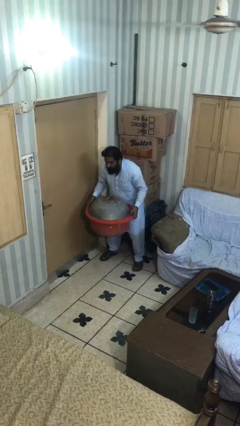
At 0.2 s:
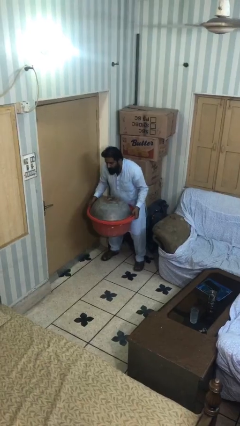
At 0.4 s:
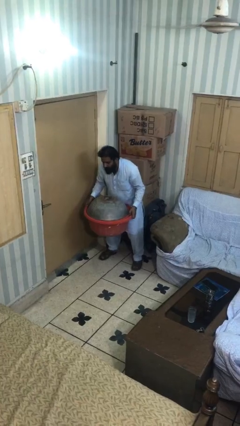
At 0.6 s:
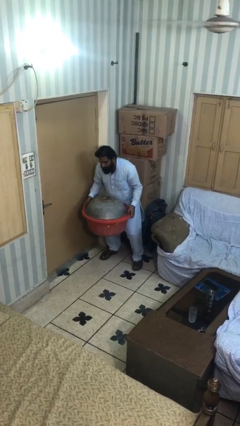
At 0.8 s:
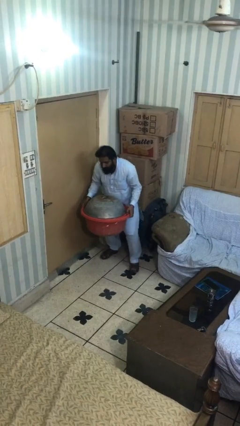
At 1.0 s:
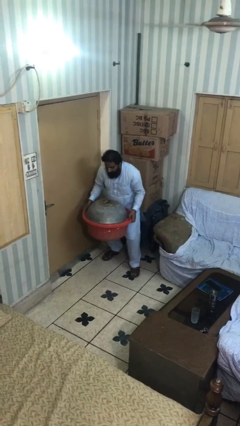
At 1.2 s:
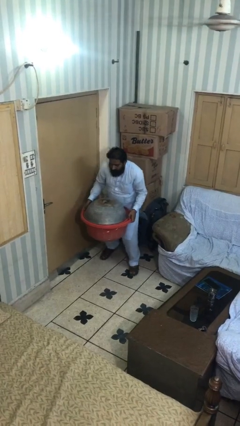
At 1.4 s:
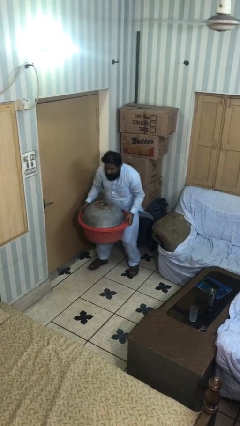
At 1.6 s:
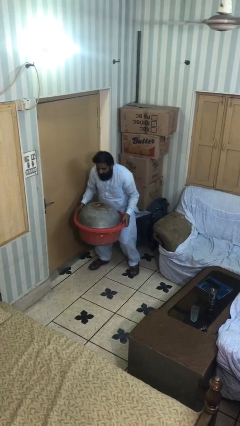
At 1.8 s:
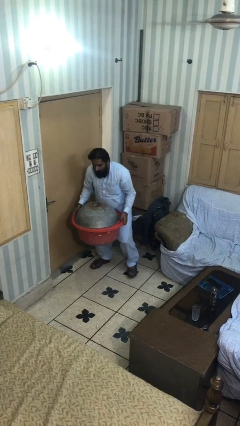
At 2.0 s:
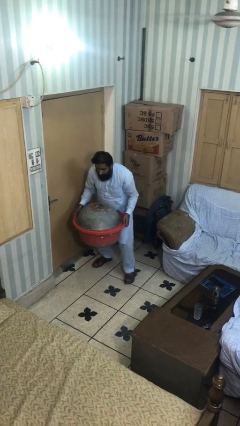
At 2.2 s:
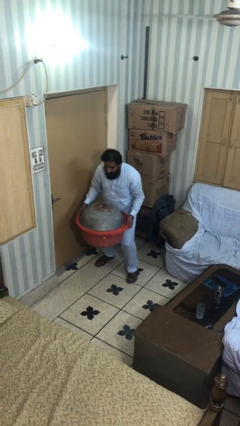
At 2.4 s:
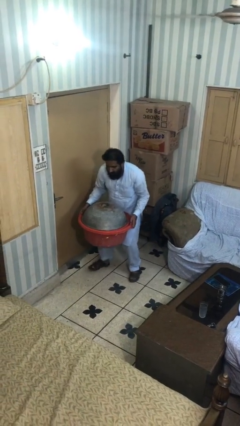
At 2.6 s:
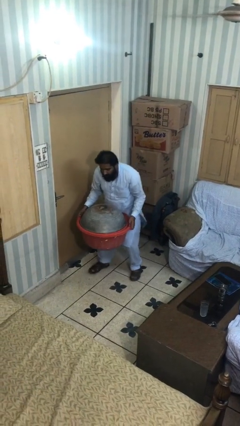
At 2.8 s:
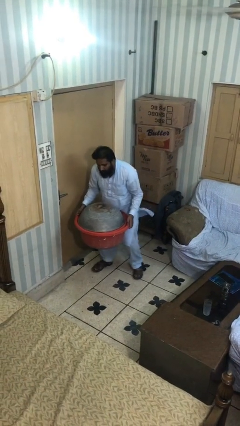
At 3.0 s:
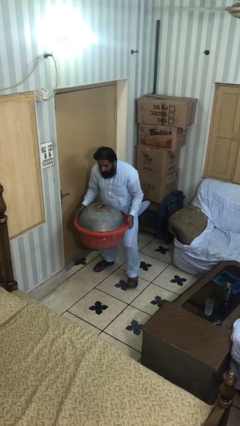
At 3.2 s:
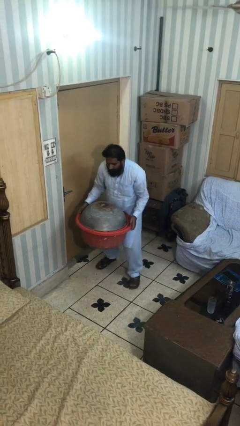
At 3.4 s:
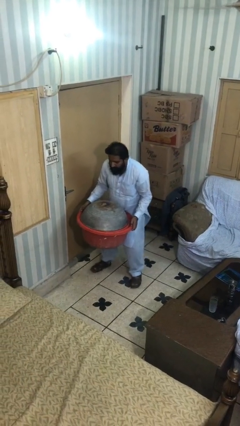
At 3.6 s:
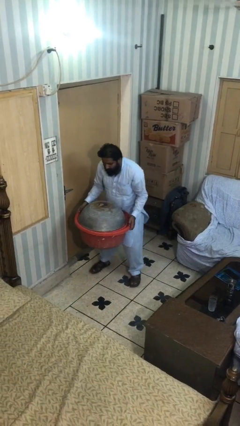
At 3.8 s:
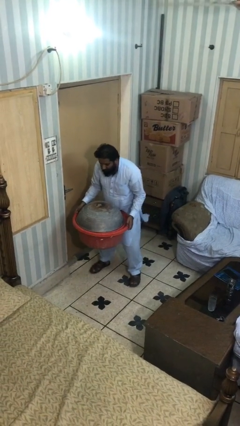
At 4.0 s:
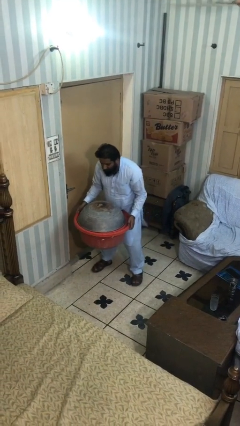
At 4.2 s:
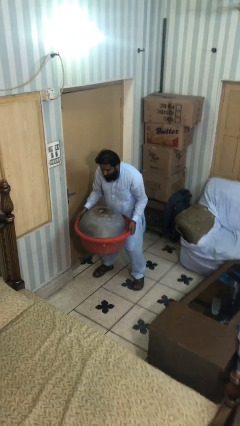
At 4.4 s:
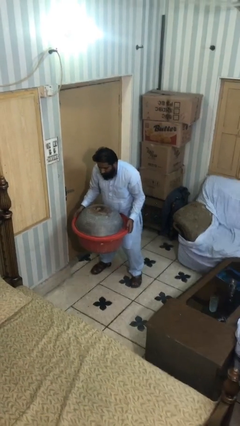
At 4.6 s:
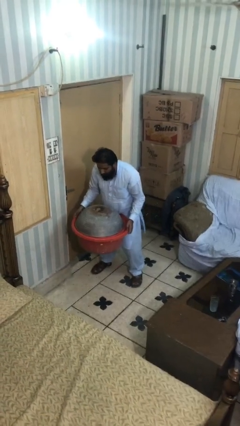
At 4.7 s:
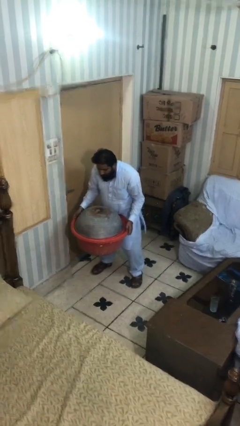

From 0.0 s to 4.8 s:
person carries heavy object

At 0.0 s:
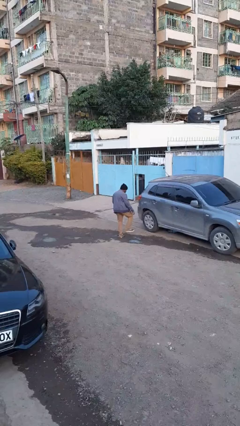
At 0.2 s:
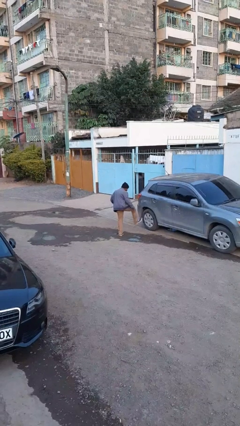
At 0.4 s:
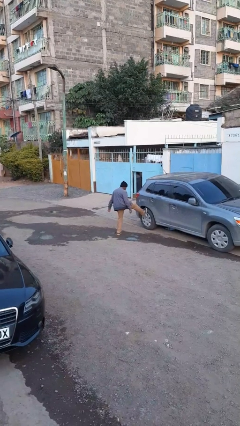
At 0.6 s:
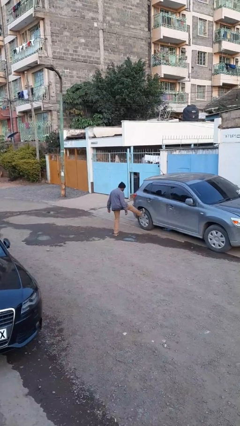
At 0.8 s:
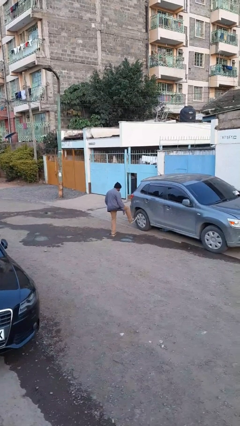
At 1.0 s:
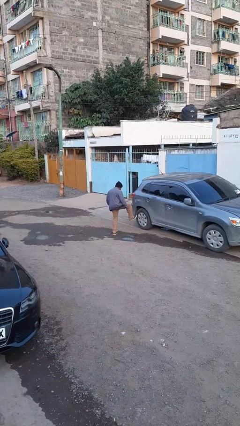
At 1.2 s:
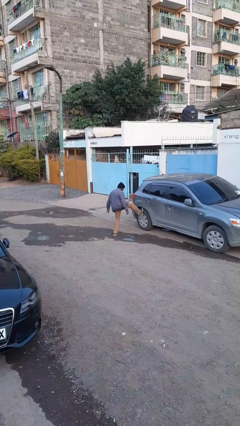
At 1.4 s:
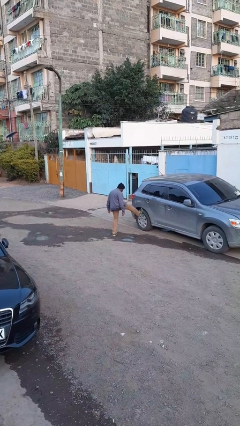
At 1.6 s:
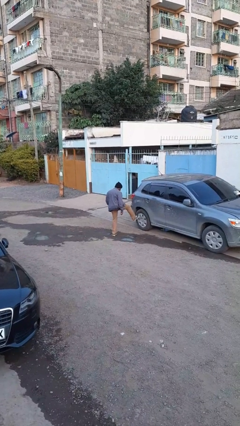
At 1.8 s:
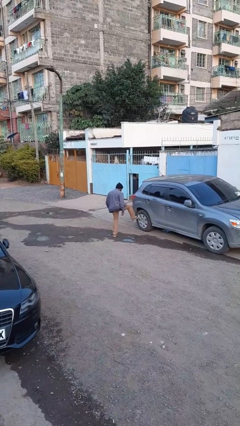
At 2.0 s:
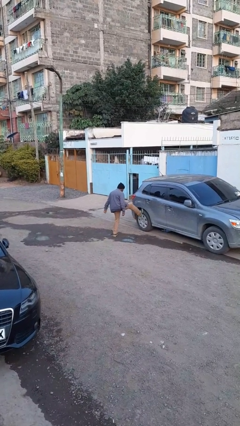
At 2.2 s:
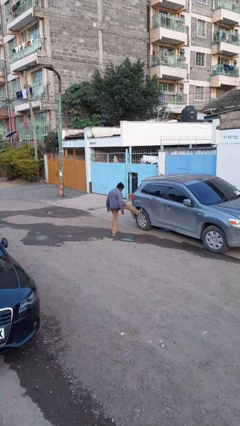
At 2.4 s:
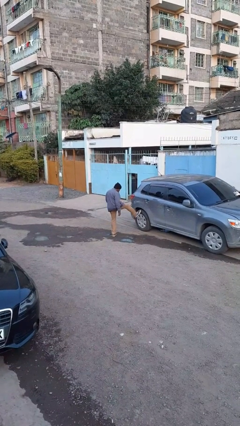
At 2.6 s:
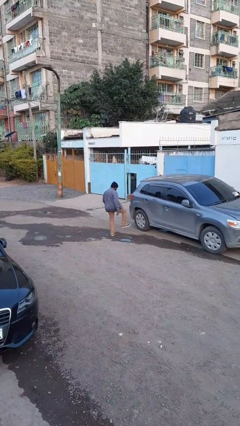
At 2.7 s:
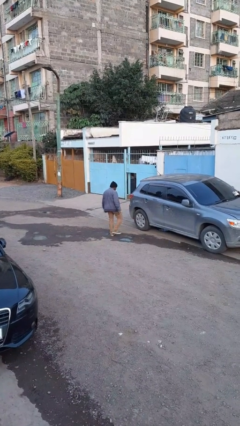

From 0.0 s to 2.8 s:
person kicks car tires

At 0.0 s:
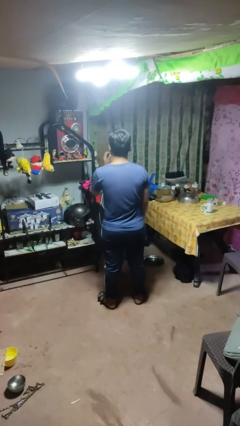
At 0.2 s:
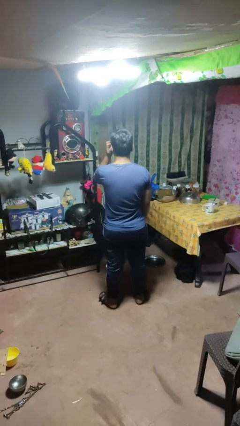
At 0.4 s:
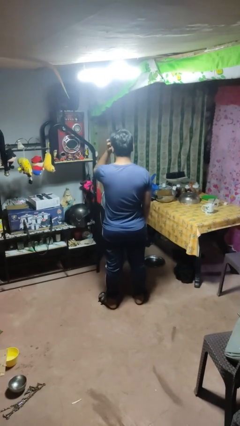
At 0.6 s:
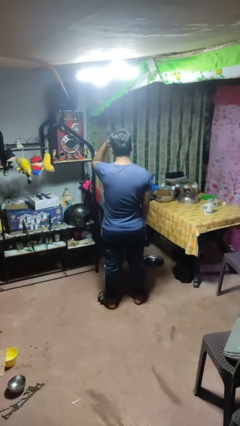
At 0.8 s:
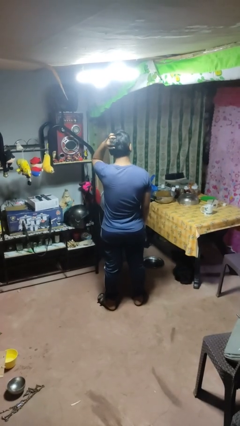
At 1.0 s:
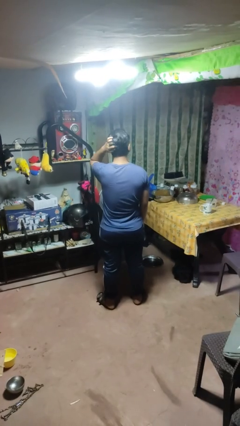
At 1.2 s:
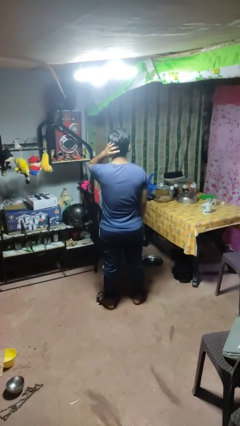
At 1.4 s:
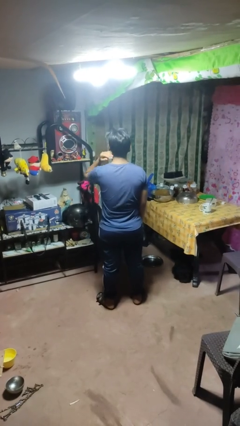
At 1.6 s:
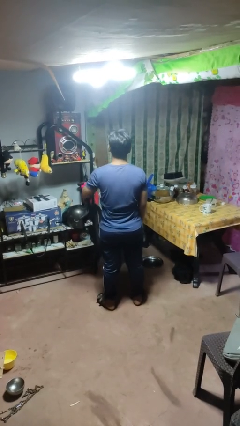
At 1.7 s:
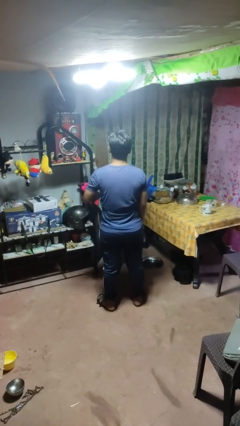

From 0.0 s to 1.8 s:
person strokes hair

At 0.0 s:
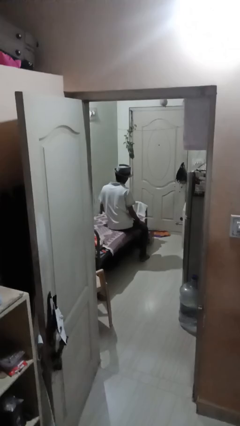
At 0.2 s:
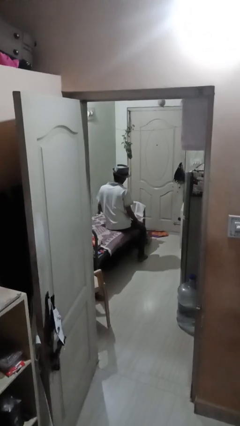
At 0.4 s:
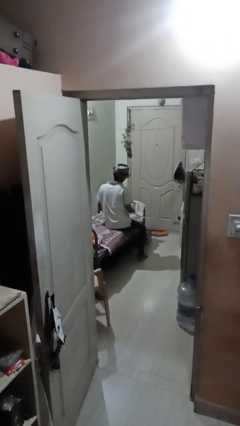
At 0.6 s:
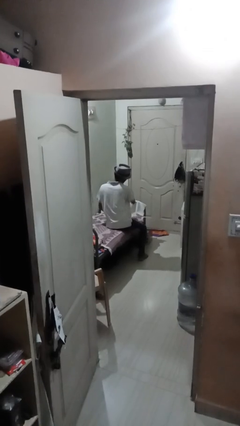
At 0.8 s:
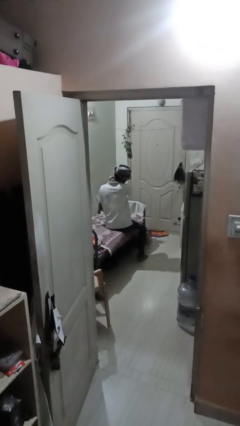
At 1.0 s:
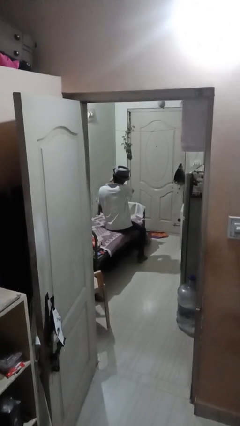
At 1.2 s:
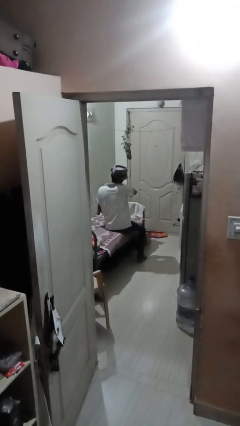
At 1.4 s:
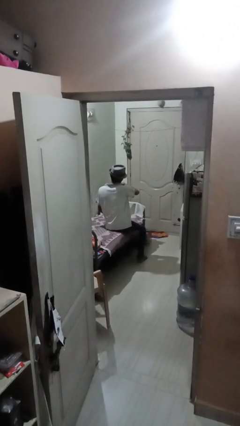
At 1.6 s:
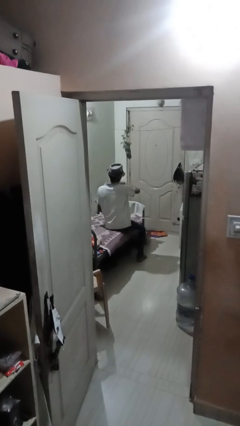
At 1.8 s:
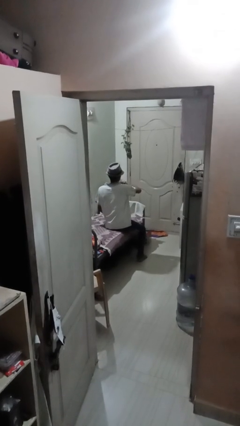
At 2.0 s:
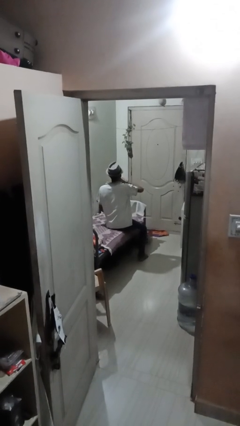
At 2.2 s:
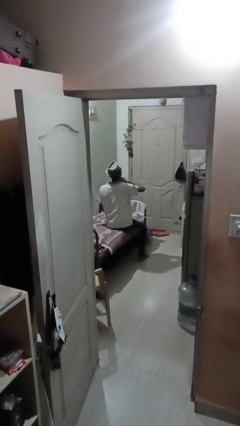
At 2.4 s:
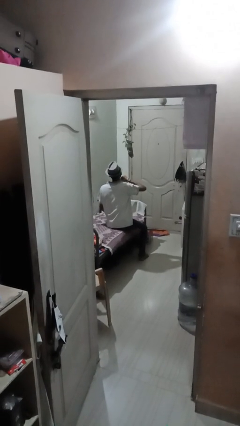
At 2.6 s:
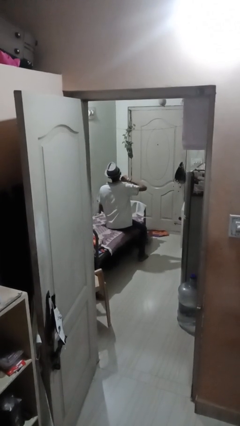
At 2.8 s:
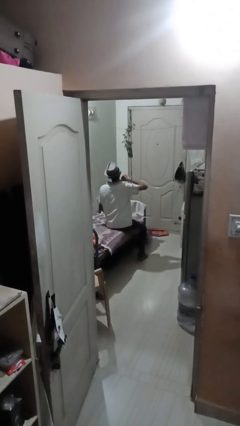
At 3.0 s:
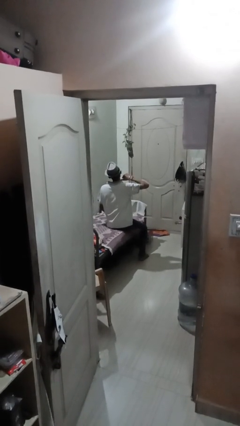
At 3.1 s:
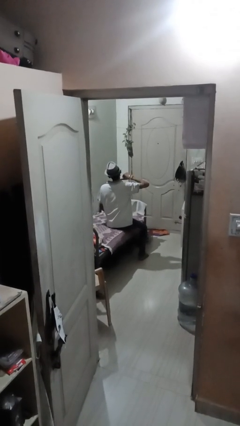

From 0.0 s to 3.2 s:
person gestures cut

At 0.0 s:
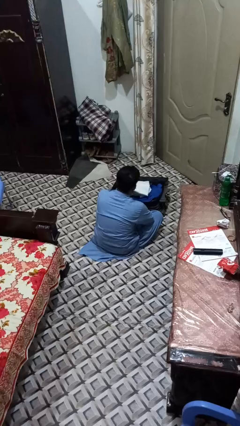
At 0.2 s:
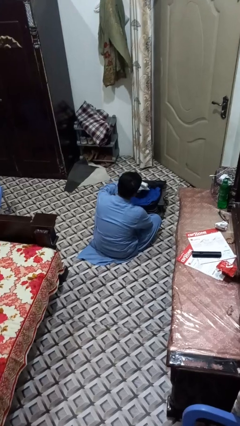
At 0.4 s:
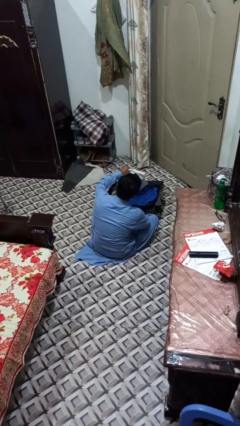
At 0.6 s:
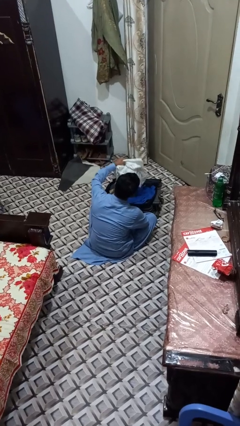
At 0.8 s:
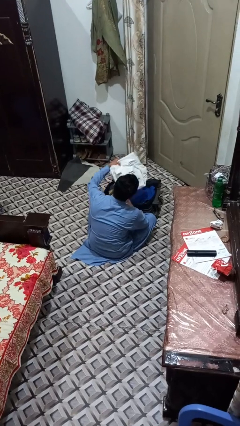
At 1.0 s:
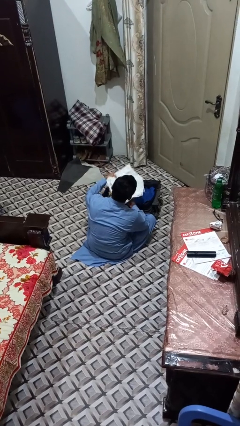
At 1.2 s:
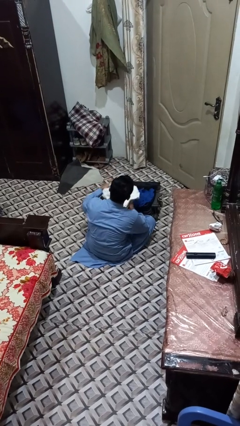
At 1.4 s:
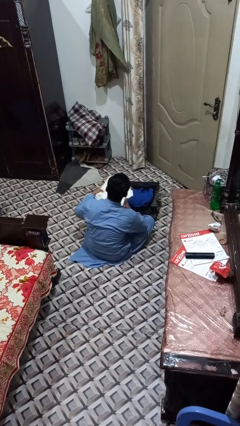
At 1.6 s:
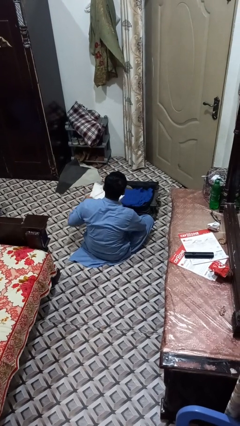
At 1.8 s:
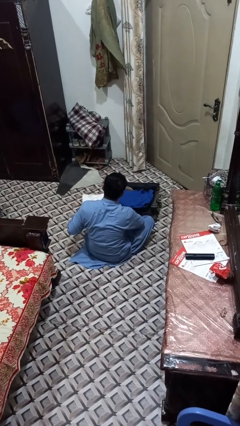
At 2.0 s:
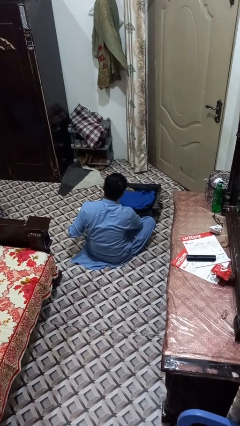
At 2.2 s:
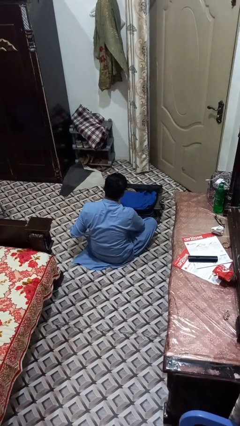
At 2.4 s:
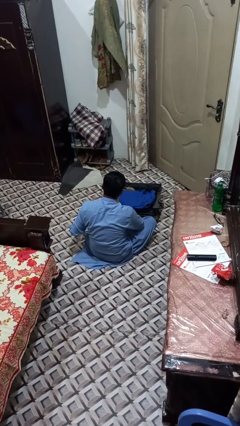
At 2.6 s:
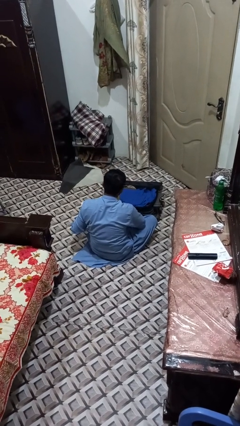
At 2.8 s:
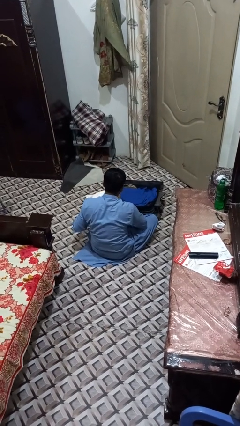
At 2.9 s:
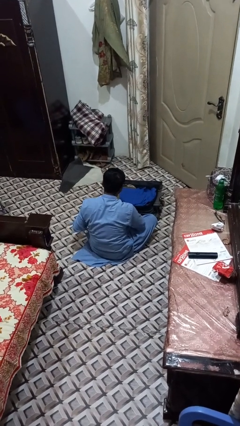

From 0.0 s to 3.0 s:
person unloads clothes from suitcase

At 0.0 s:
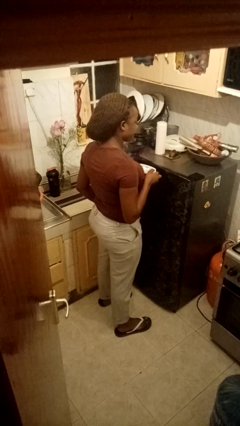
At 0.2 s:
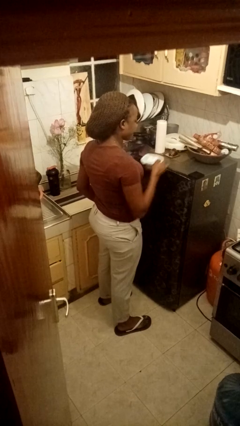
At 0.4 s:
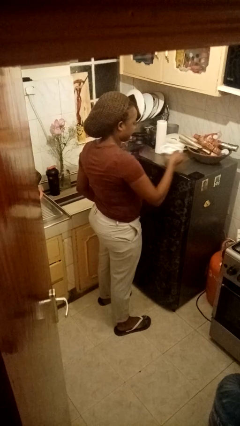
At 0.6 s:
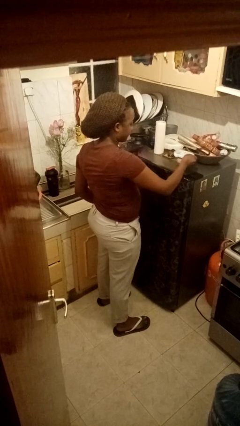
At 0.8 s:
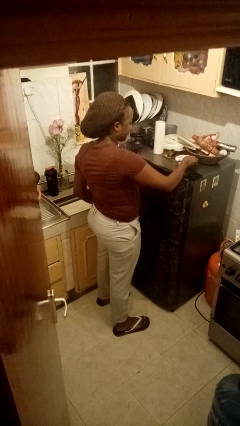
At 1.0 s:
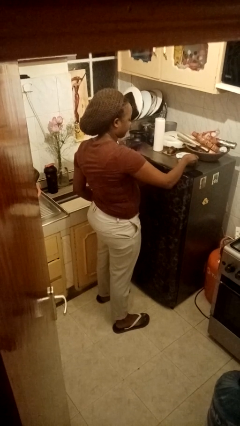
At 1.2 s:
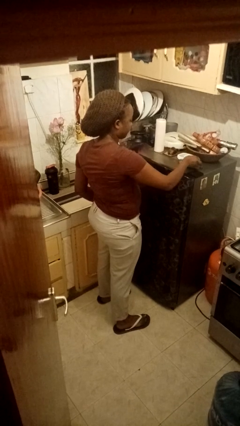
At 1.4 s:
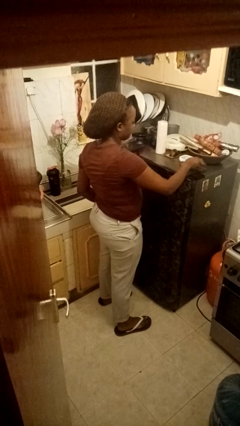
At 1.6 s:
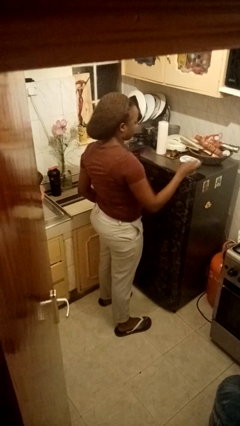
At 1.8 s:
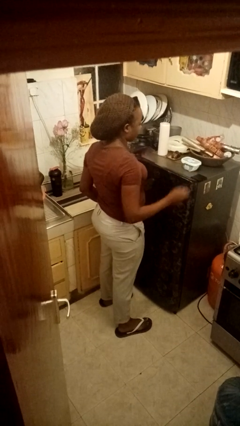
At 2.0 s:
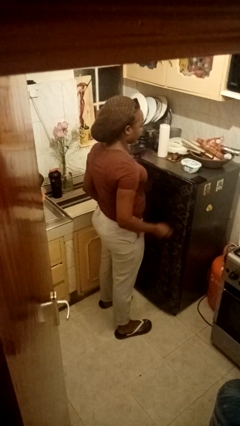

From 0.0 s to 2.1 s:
person puts down object on countertop
